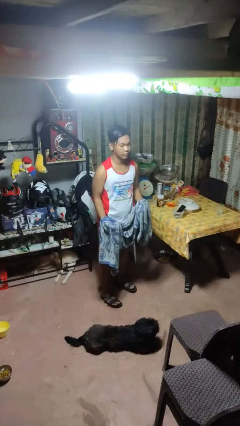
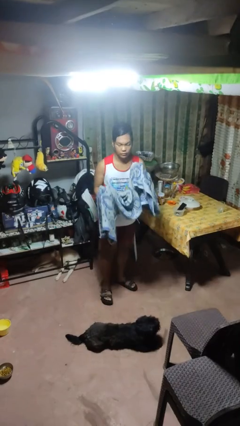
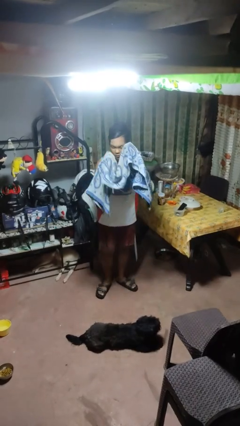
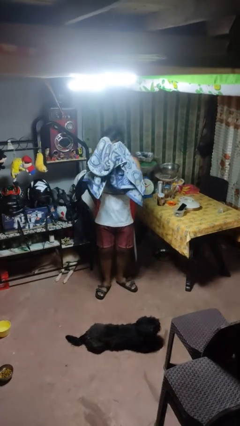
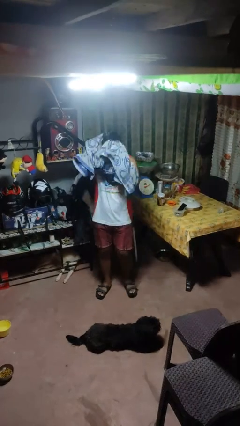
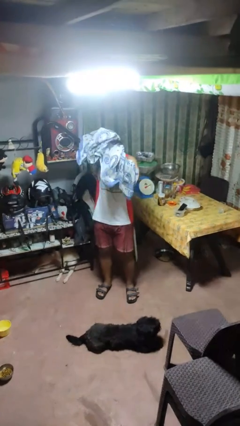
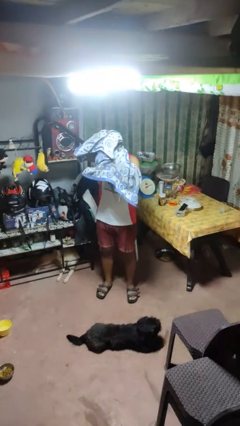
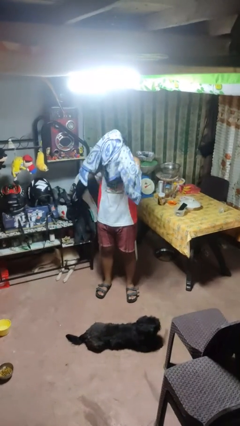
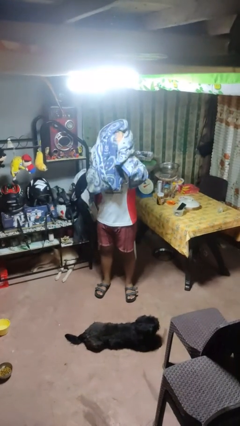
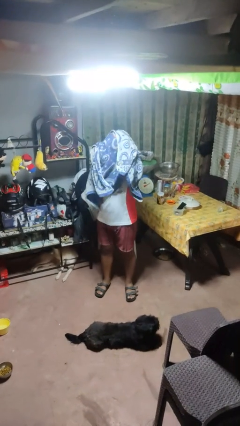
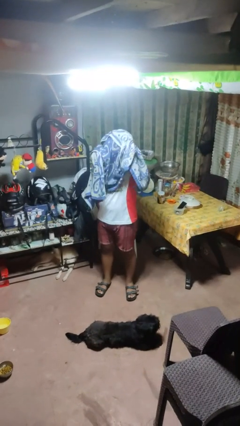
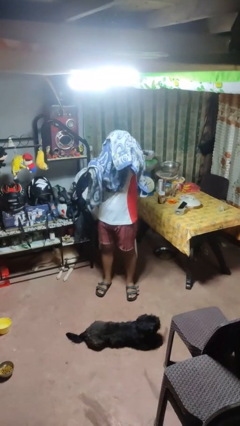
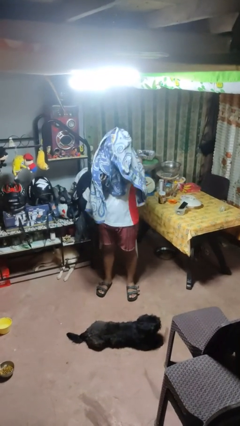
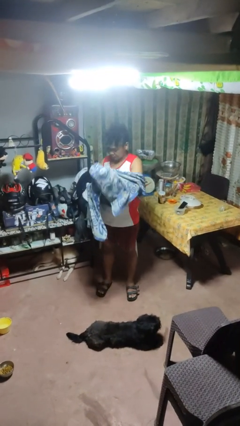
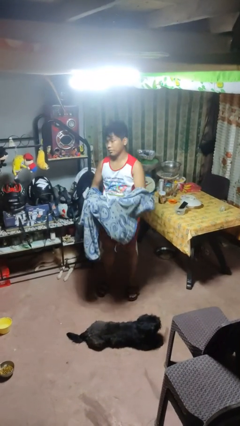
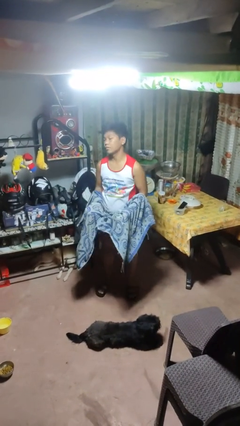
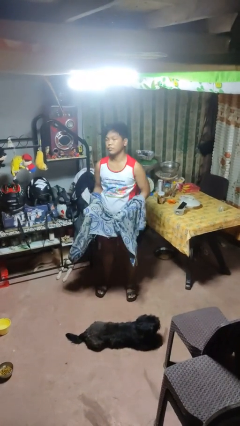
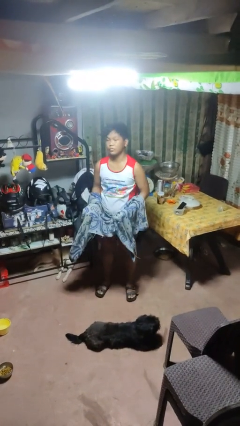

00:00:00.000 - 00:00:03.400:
person dries hair with towel

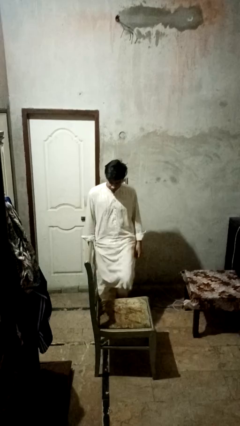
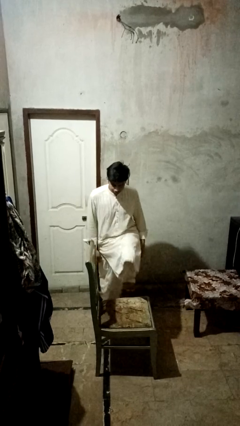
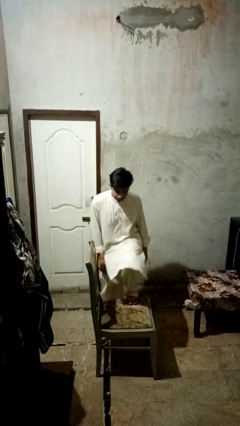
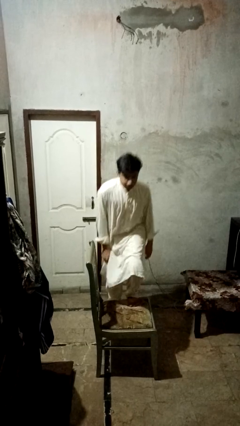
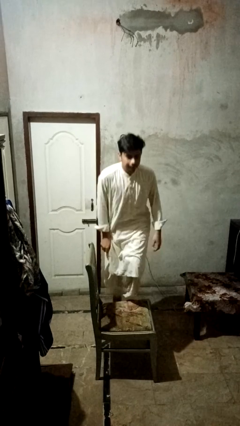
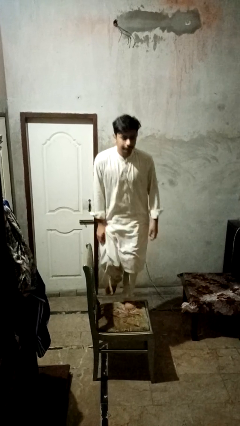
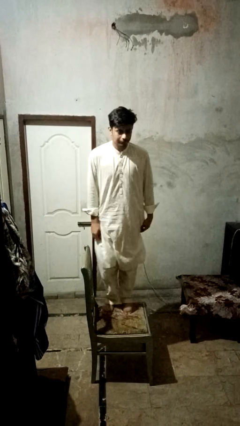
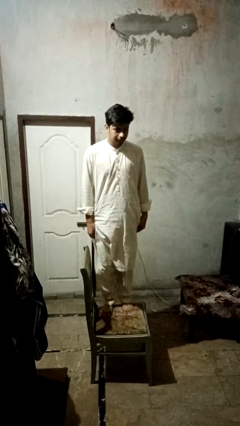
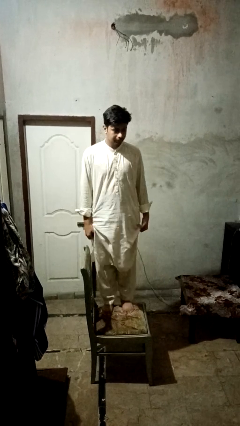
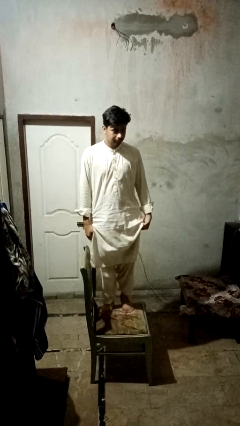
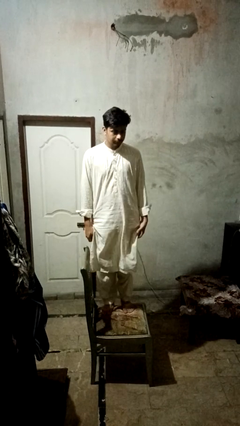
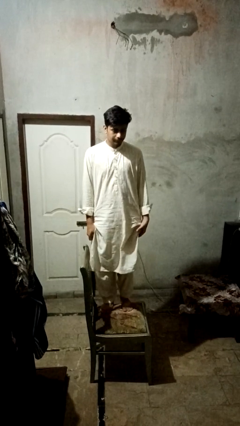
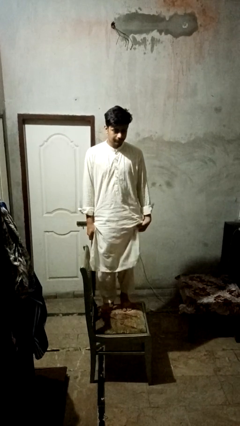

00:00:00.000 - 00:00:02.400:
person climbs on chair

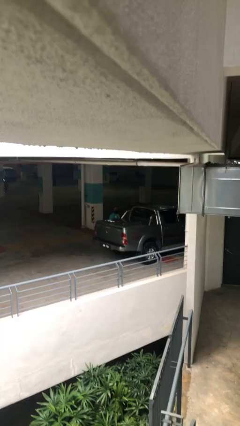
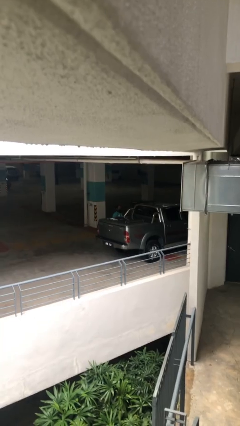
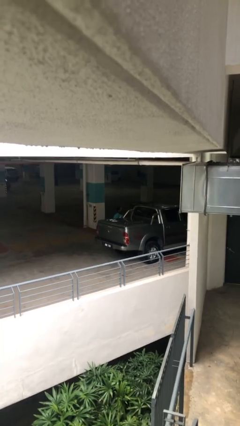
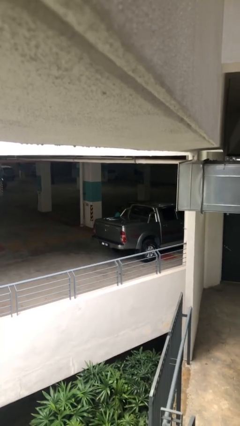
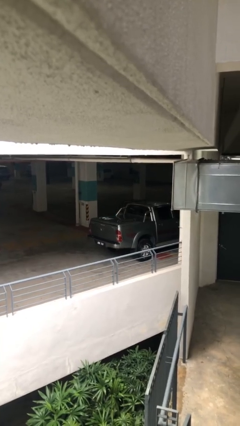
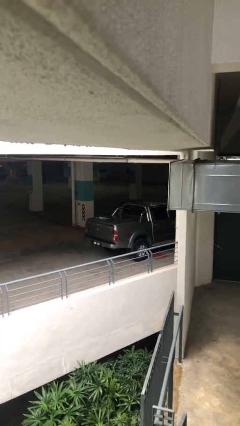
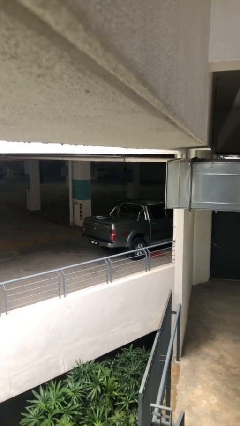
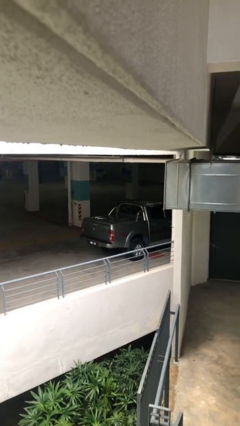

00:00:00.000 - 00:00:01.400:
person enters car

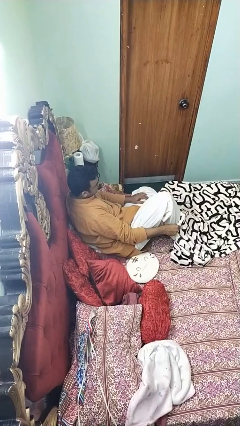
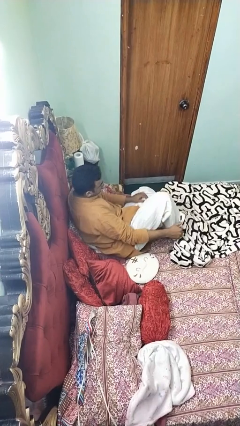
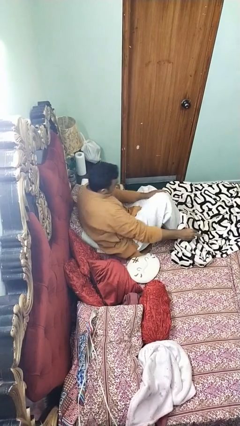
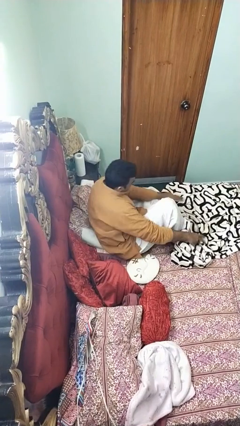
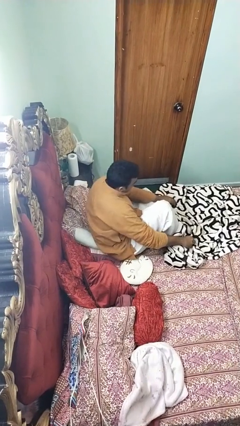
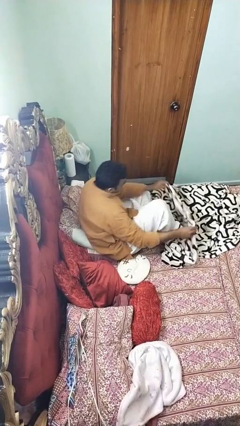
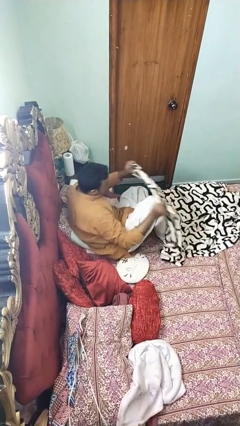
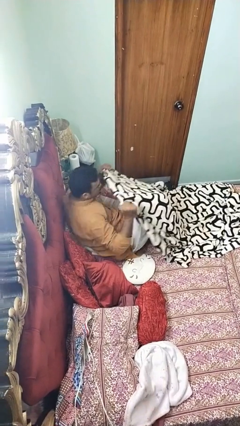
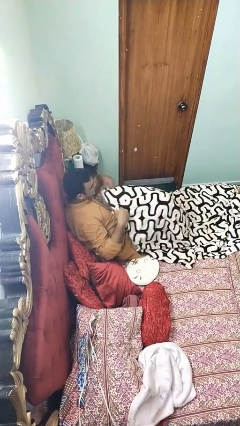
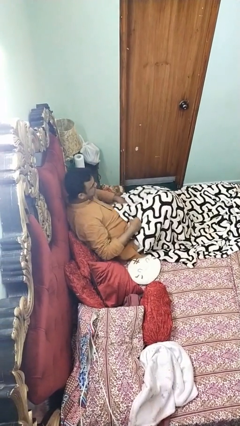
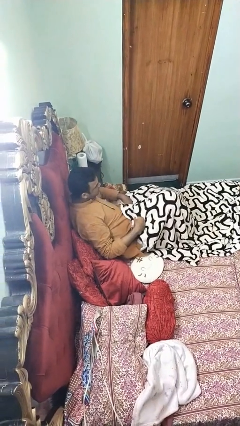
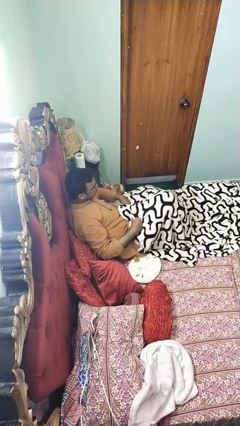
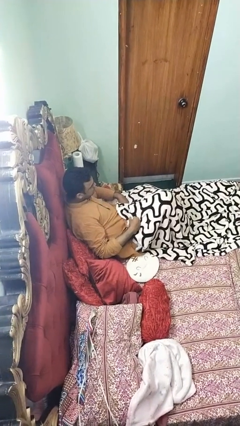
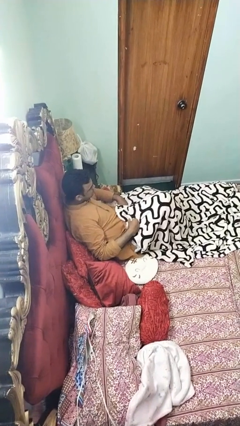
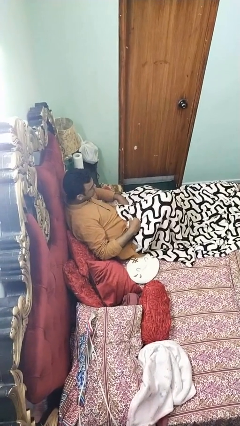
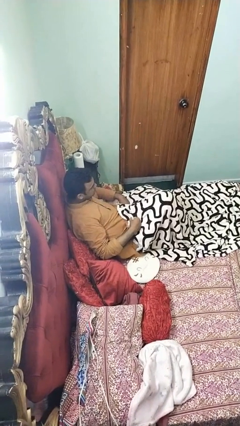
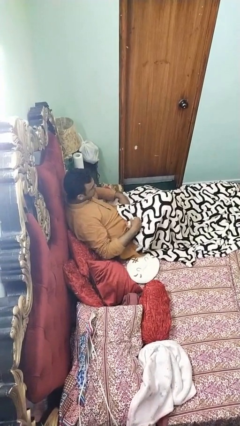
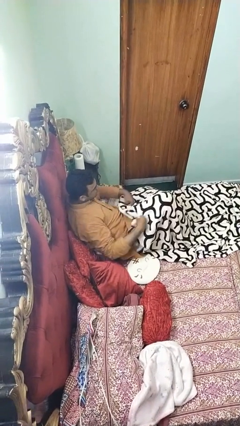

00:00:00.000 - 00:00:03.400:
person covers with blanket

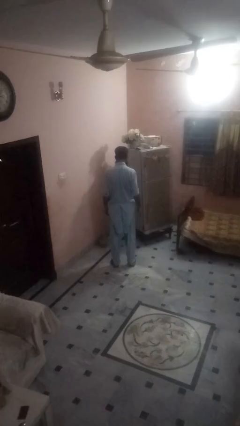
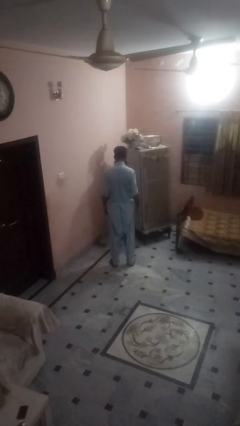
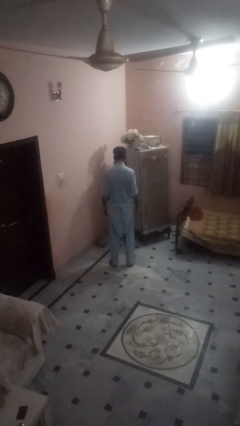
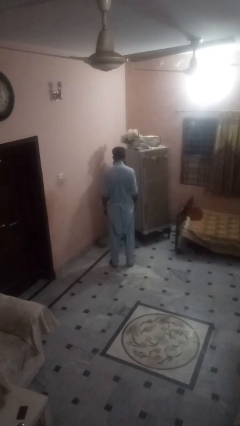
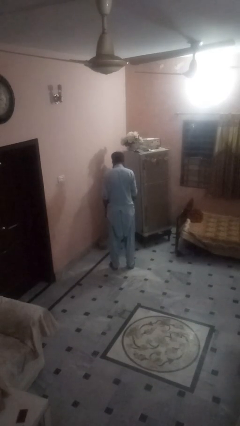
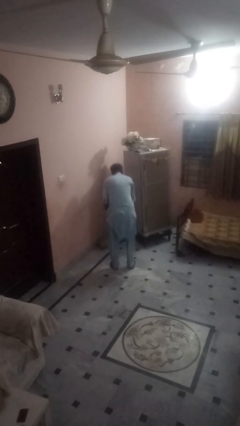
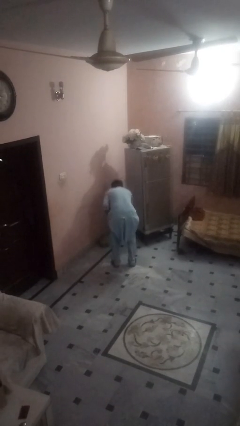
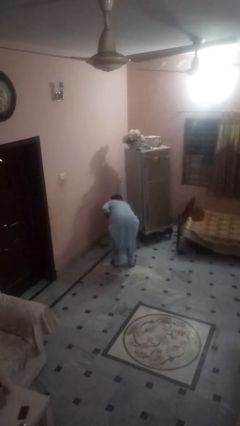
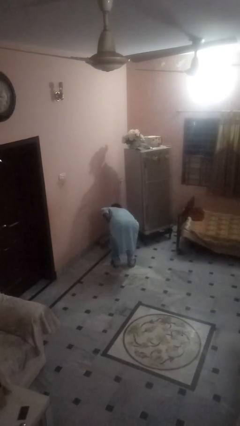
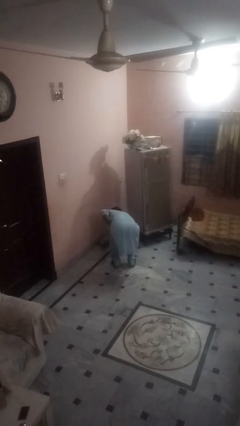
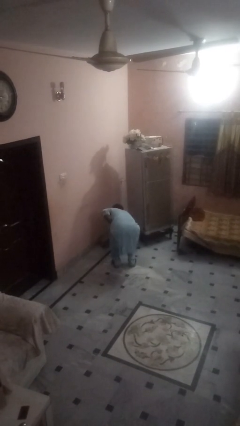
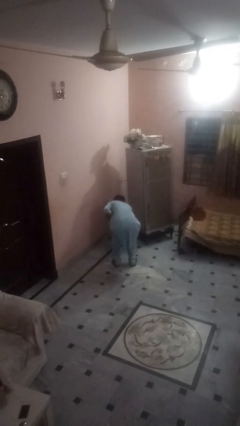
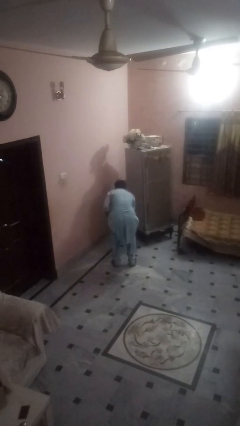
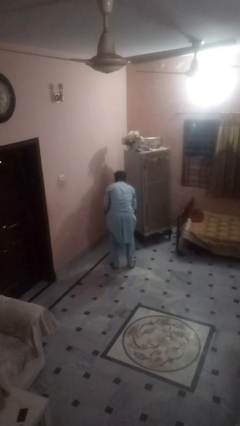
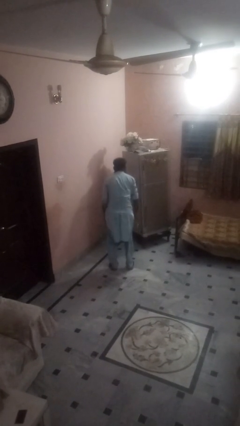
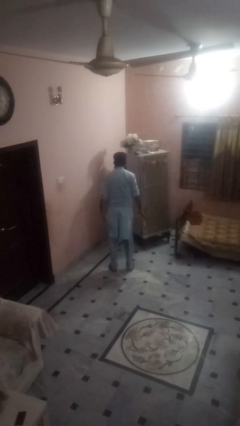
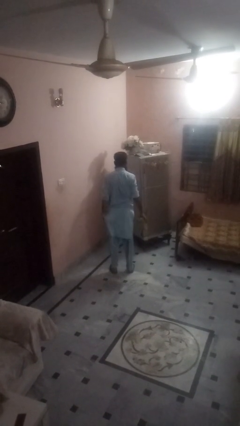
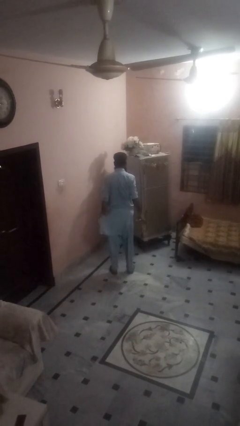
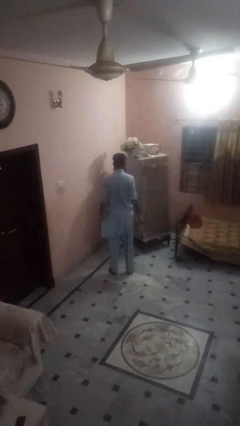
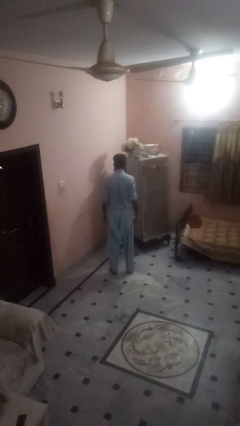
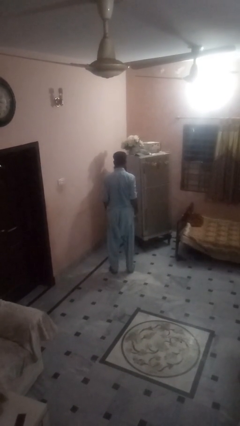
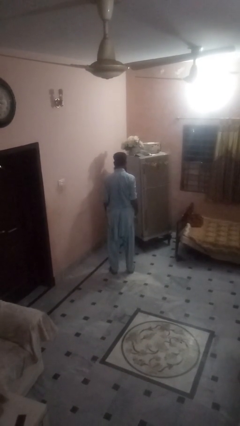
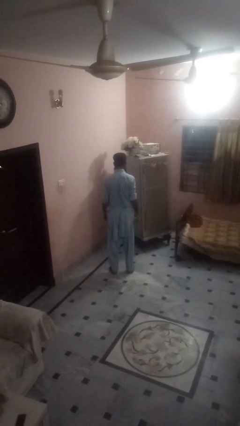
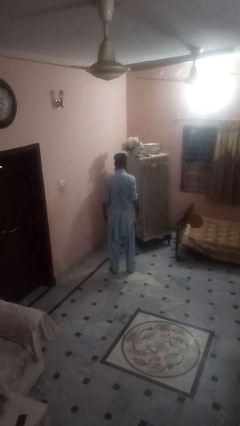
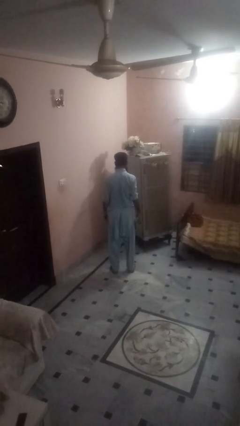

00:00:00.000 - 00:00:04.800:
person picks up object from floor

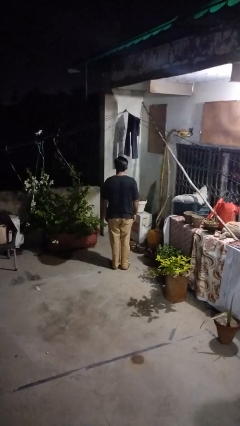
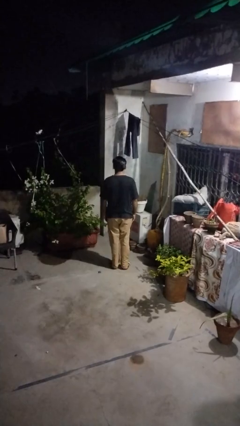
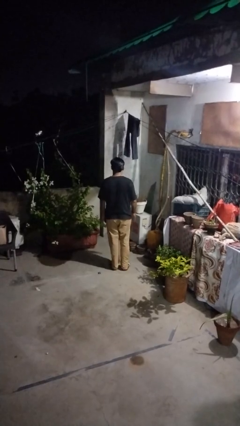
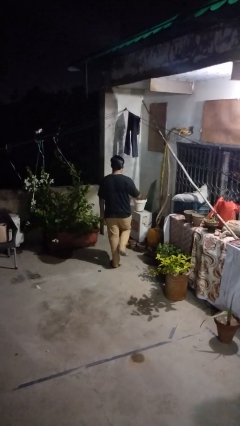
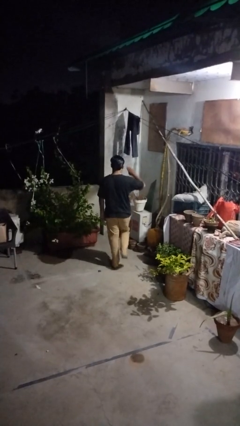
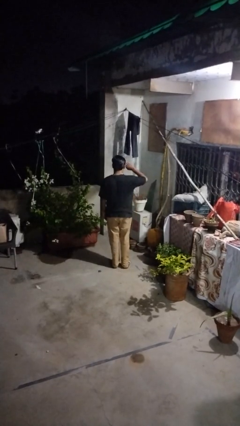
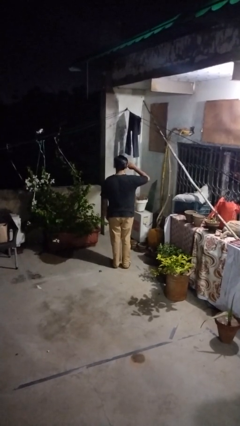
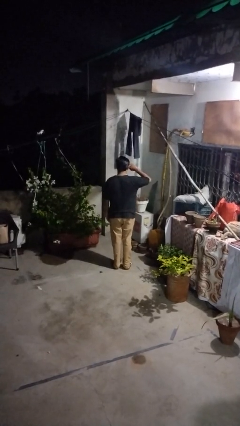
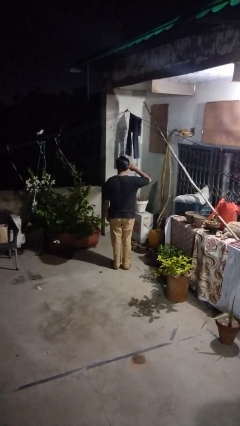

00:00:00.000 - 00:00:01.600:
person salutes
